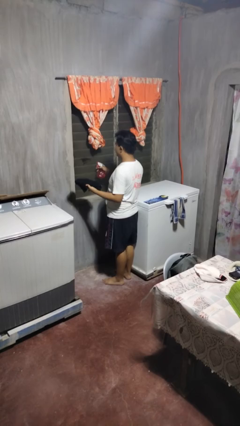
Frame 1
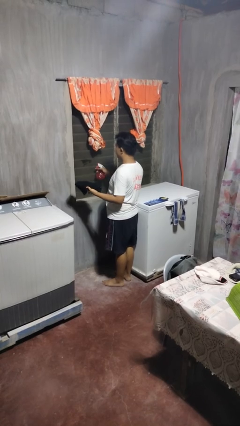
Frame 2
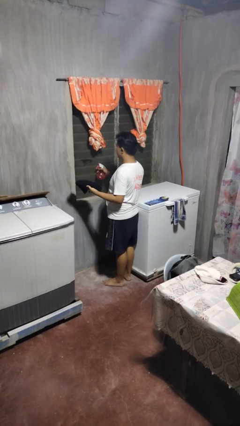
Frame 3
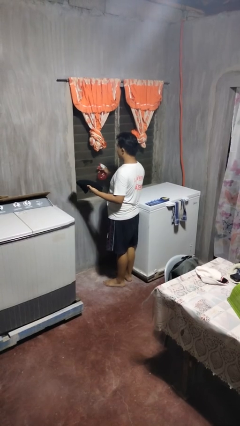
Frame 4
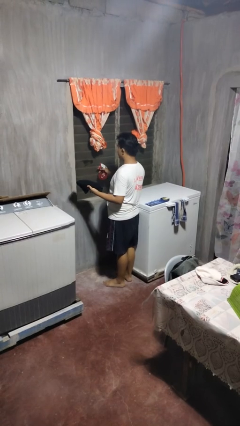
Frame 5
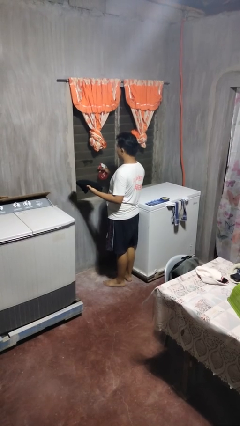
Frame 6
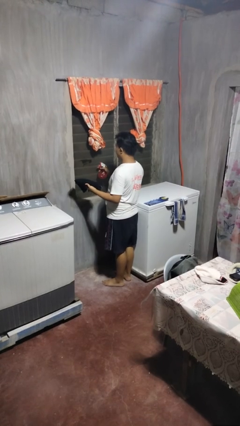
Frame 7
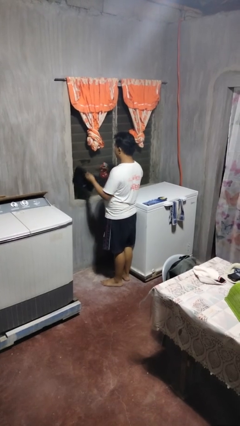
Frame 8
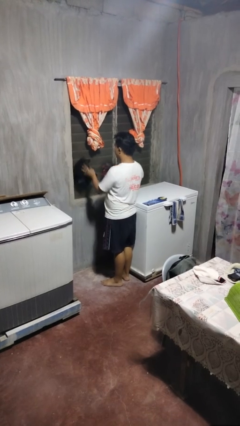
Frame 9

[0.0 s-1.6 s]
person sprays from bottle

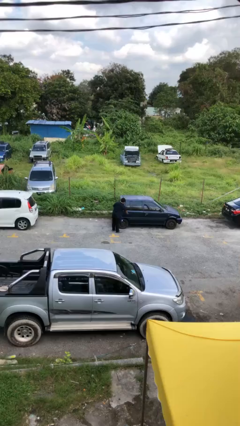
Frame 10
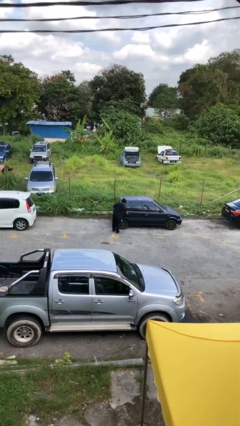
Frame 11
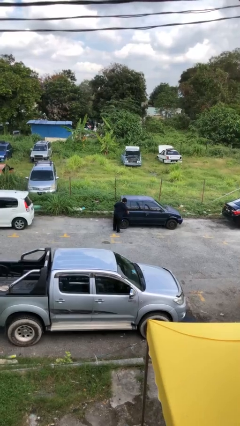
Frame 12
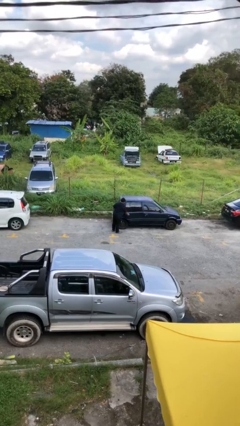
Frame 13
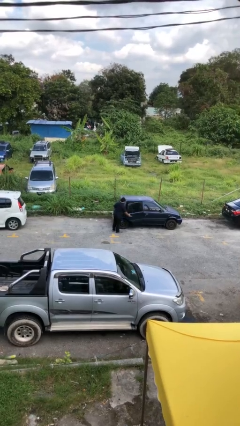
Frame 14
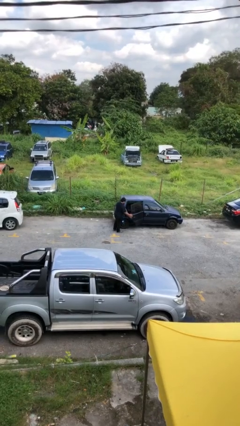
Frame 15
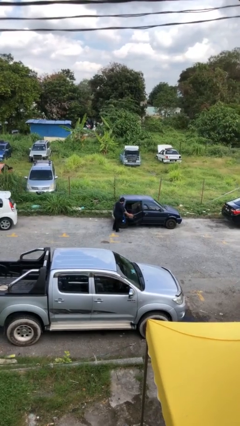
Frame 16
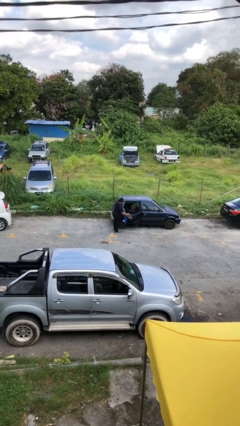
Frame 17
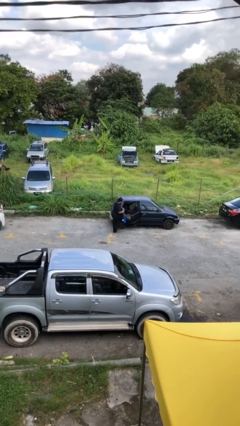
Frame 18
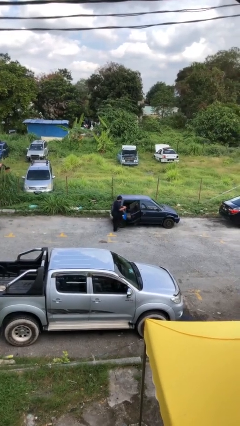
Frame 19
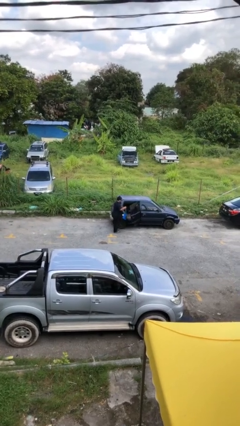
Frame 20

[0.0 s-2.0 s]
person opens car door

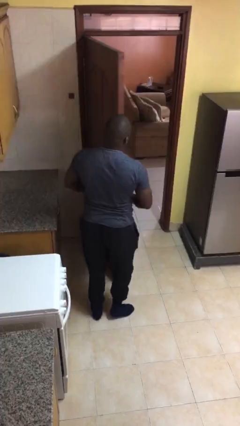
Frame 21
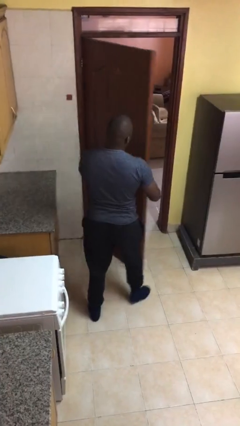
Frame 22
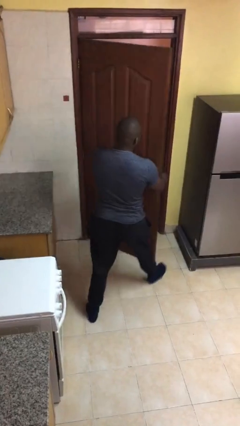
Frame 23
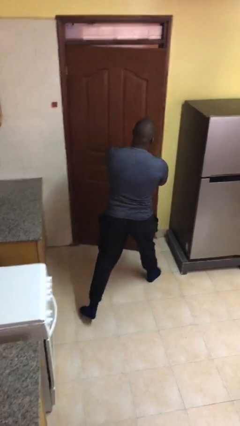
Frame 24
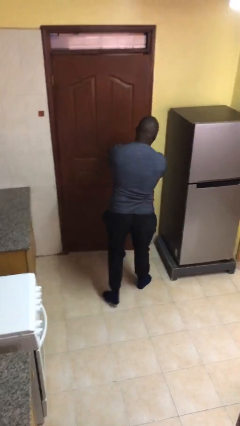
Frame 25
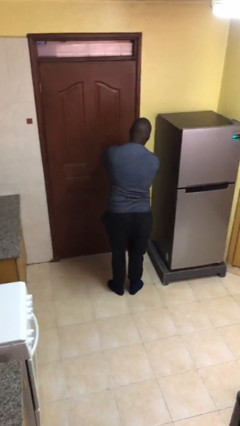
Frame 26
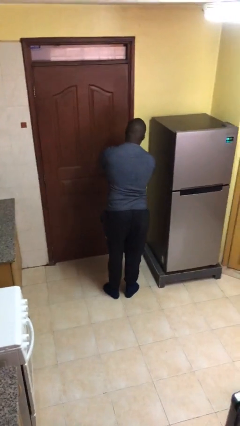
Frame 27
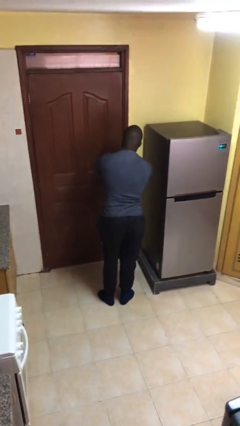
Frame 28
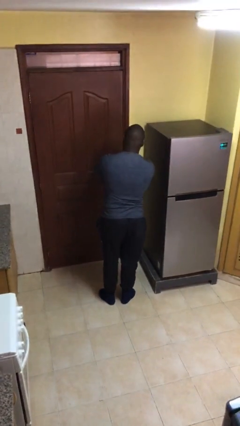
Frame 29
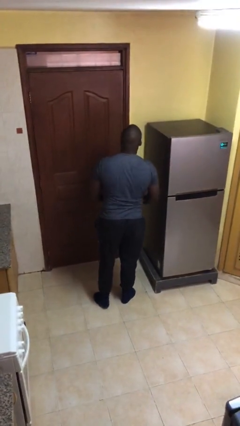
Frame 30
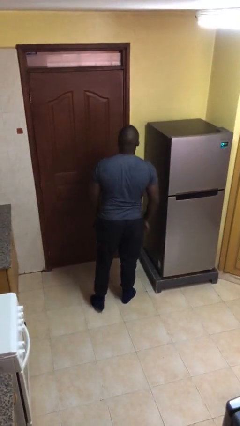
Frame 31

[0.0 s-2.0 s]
person closes facility door

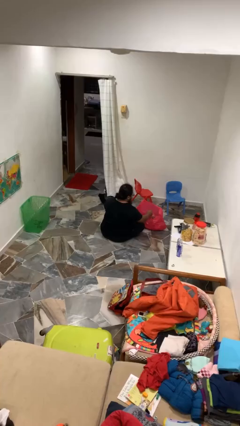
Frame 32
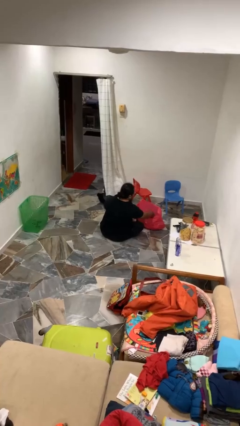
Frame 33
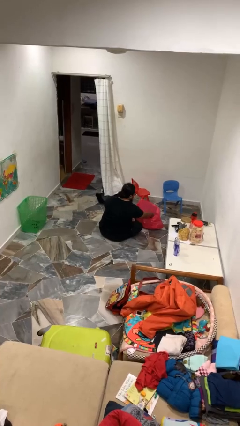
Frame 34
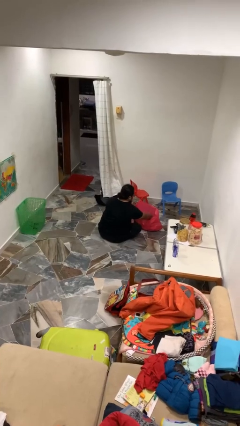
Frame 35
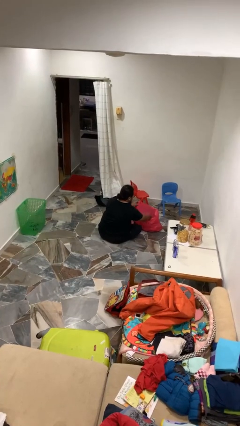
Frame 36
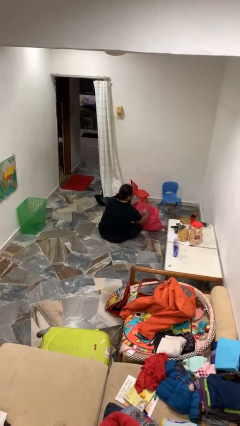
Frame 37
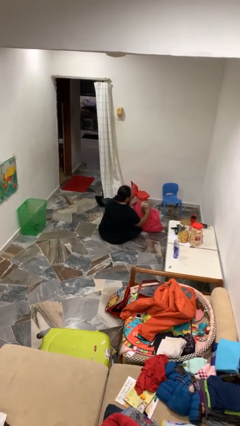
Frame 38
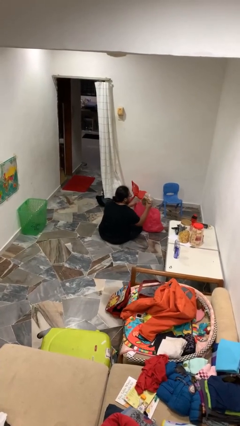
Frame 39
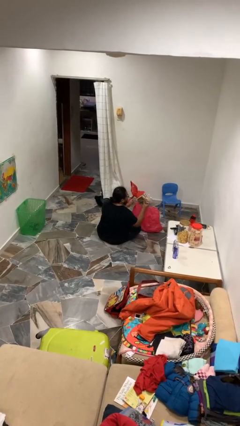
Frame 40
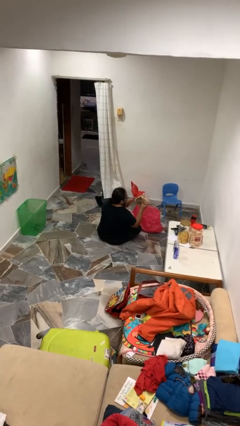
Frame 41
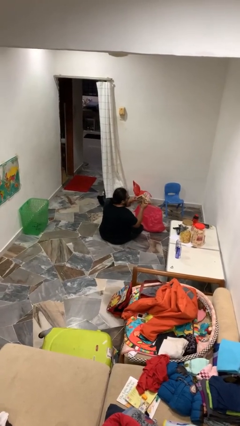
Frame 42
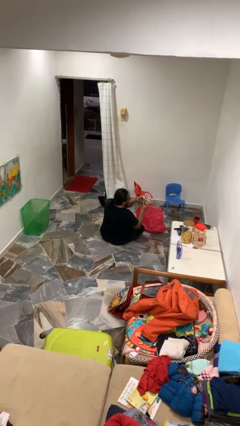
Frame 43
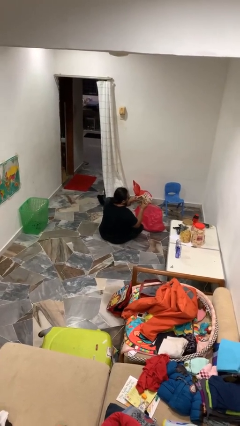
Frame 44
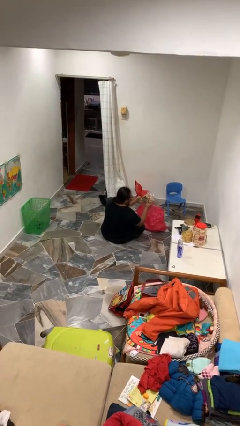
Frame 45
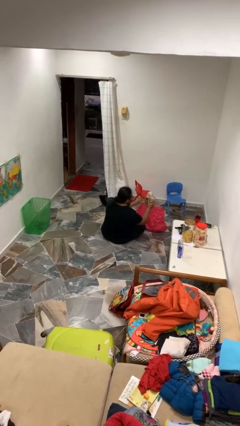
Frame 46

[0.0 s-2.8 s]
person takes object from bag

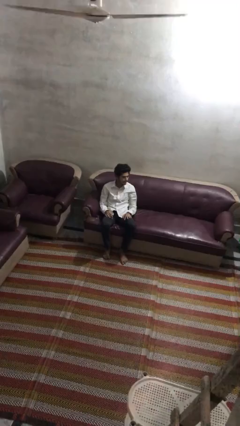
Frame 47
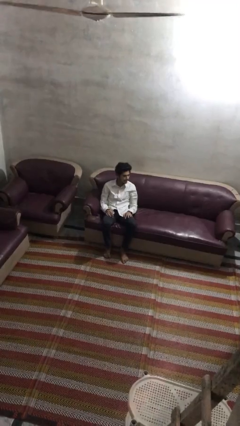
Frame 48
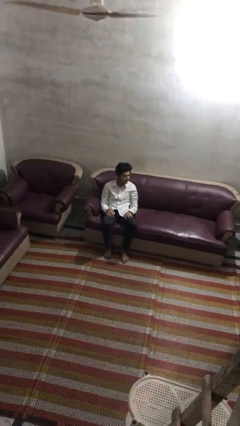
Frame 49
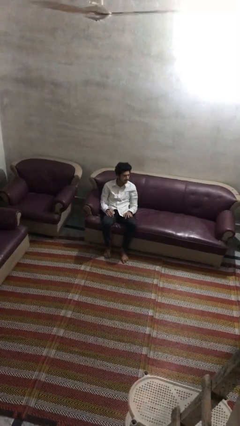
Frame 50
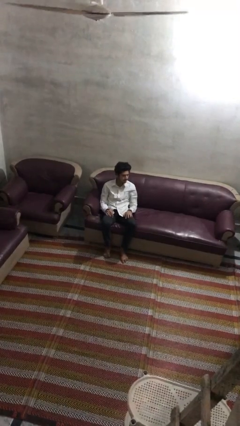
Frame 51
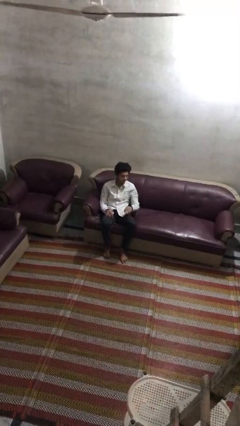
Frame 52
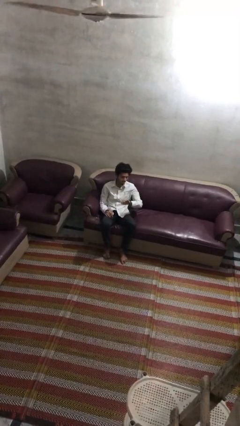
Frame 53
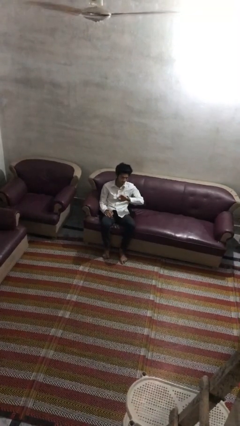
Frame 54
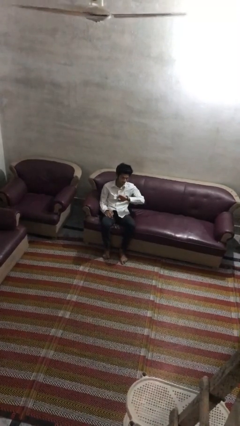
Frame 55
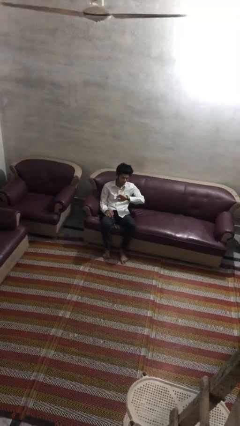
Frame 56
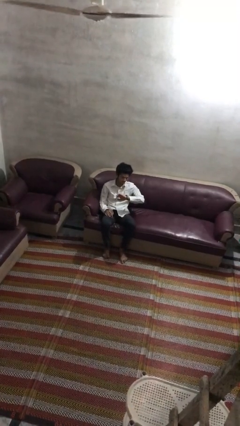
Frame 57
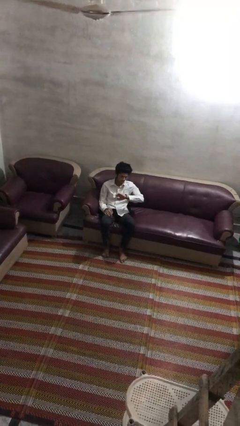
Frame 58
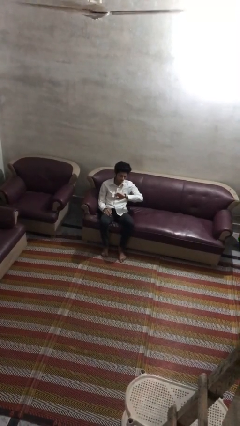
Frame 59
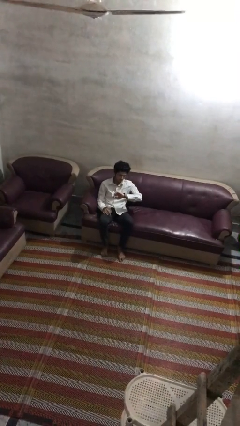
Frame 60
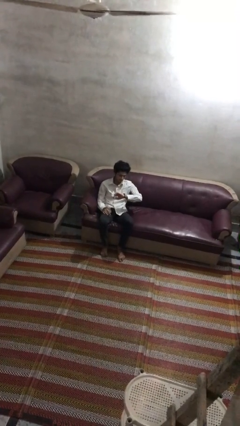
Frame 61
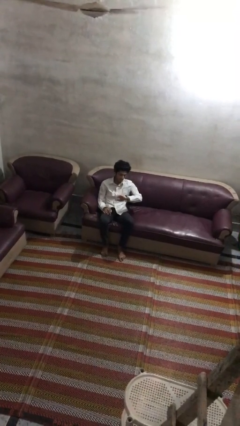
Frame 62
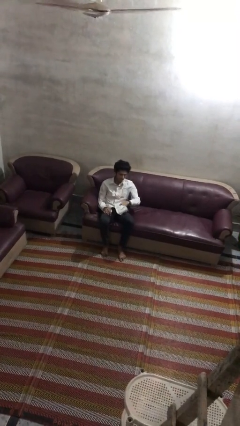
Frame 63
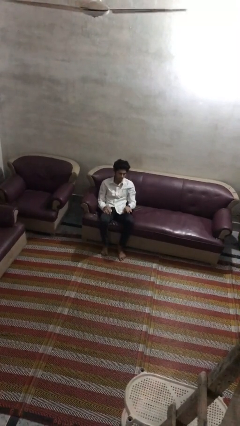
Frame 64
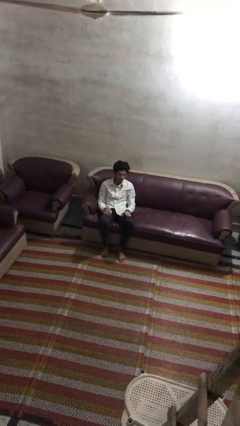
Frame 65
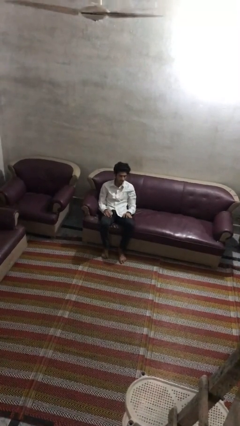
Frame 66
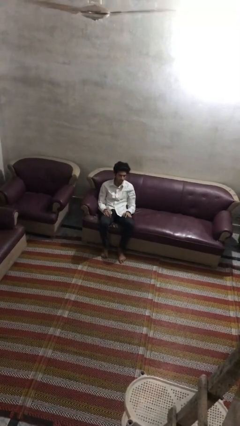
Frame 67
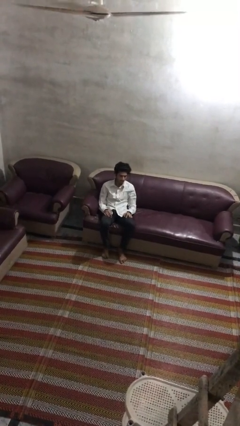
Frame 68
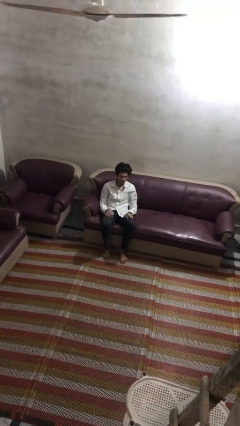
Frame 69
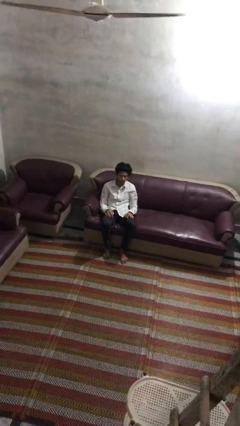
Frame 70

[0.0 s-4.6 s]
person looks at wristwatch

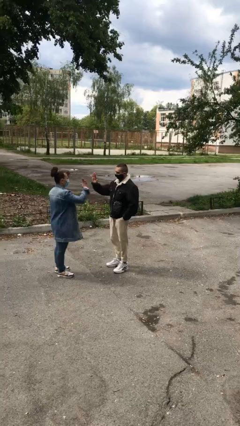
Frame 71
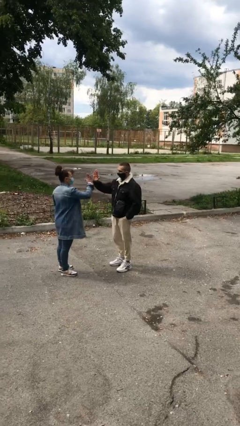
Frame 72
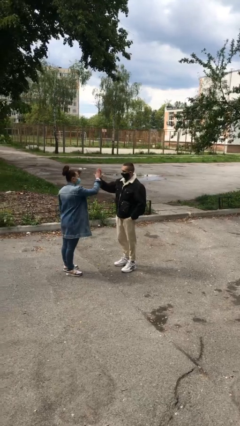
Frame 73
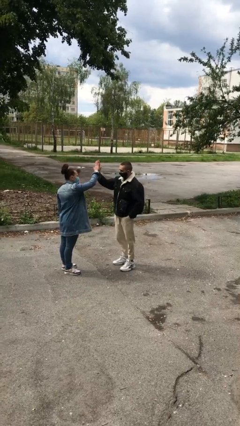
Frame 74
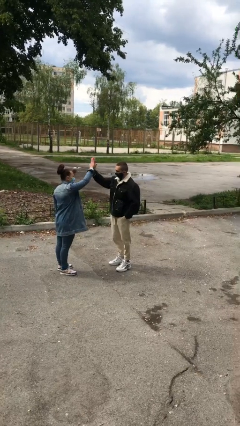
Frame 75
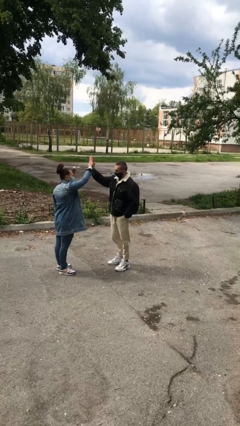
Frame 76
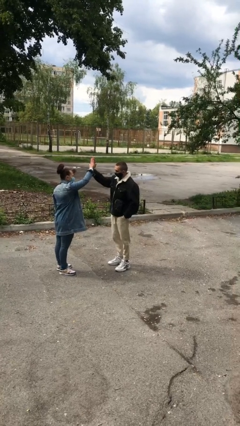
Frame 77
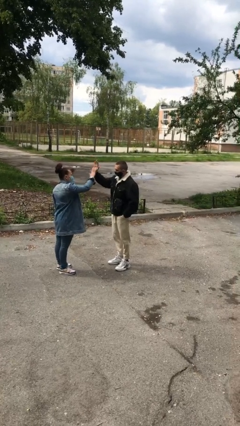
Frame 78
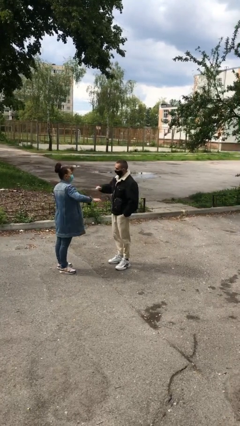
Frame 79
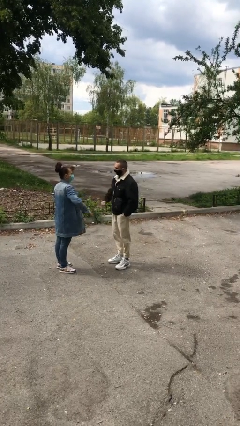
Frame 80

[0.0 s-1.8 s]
person highfives hand

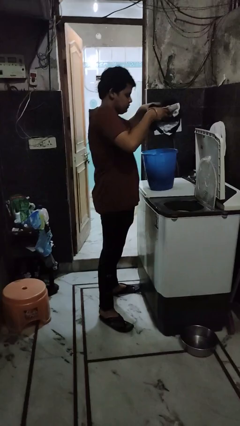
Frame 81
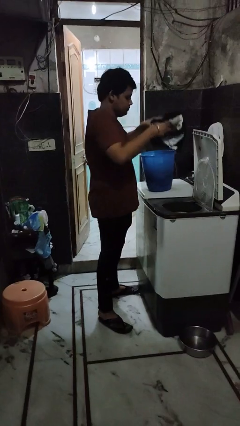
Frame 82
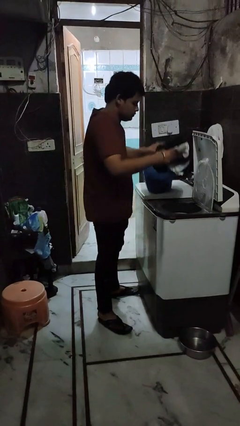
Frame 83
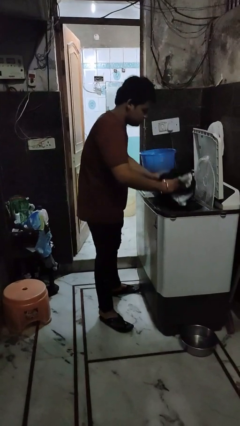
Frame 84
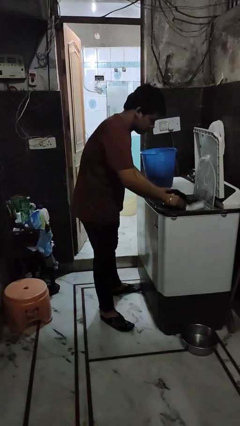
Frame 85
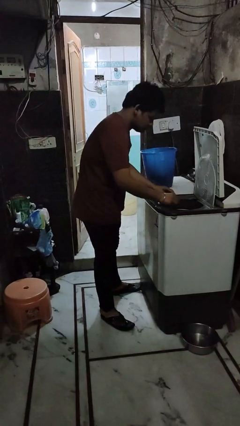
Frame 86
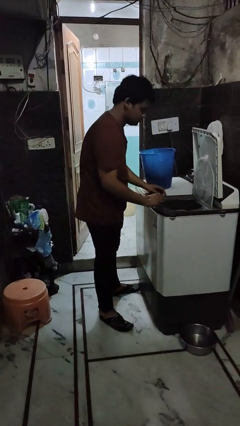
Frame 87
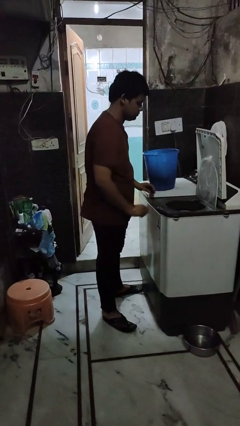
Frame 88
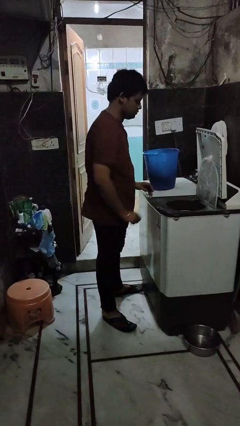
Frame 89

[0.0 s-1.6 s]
person loads dryer

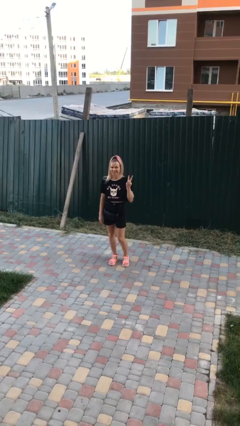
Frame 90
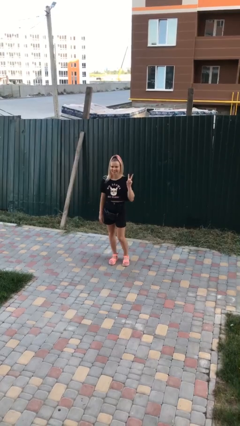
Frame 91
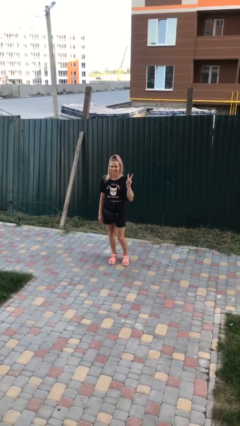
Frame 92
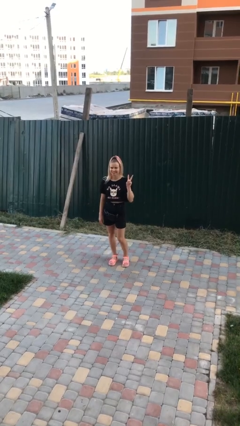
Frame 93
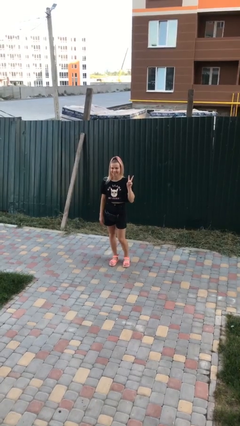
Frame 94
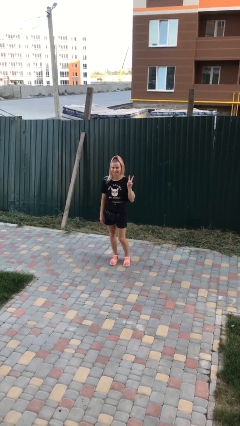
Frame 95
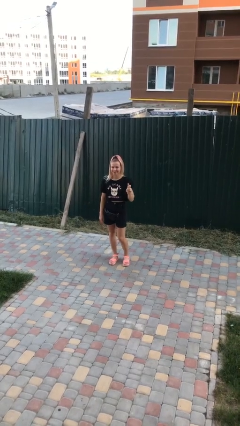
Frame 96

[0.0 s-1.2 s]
person gestures peace
